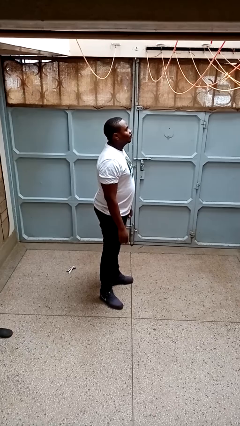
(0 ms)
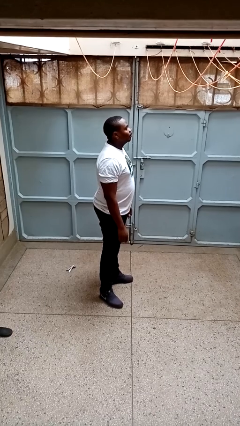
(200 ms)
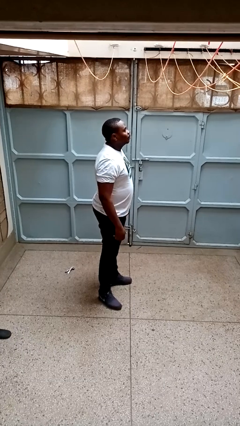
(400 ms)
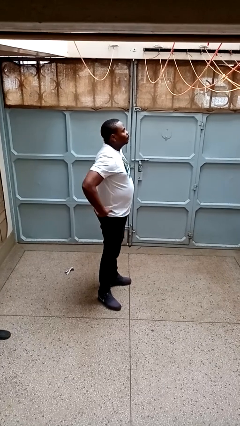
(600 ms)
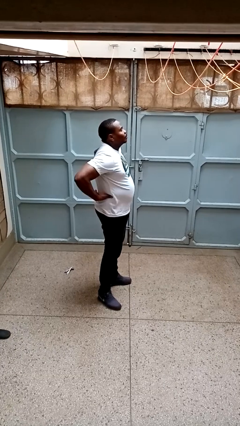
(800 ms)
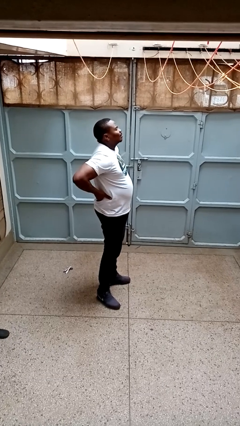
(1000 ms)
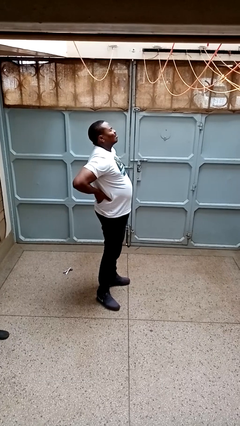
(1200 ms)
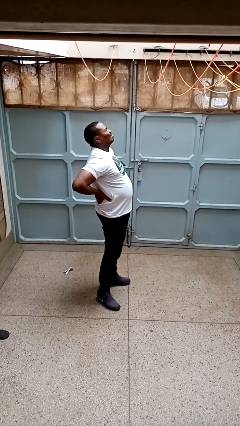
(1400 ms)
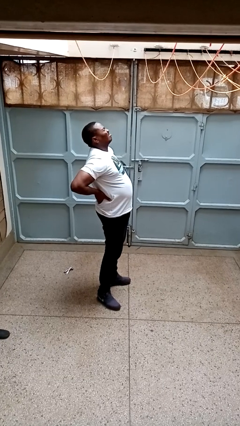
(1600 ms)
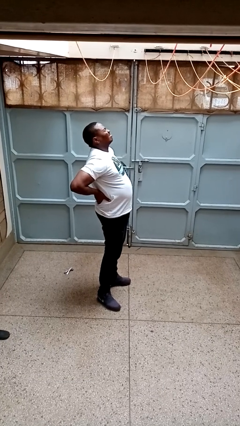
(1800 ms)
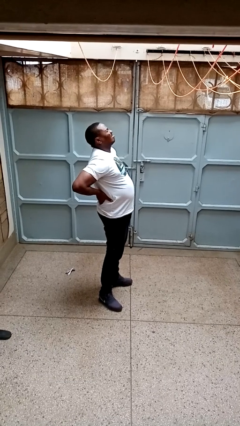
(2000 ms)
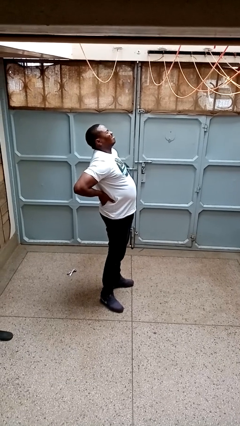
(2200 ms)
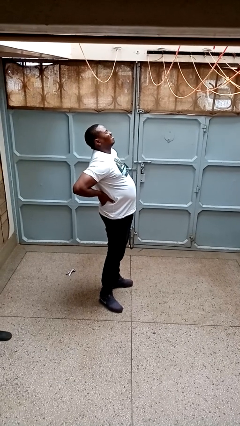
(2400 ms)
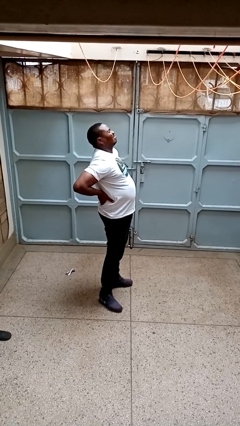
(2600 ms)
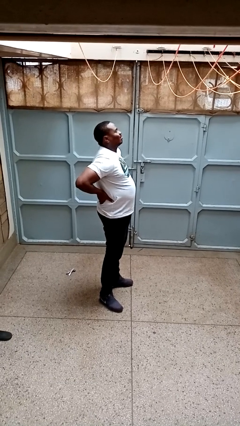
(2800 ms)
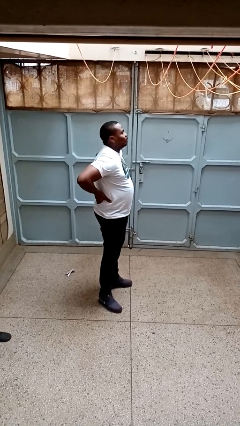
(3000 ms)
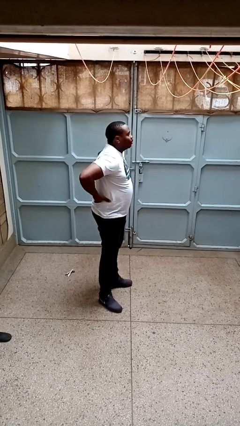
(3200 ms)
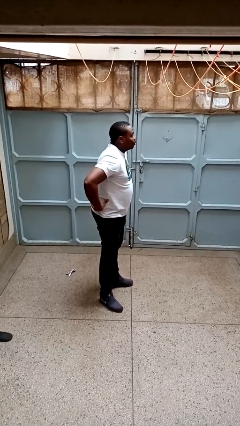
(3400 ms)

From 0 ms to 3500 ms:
person stretches back

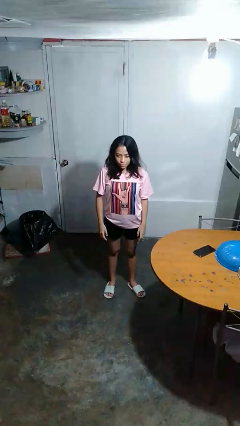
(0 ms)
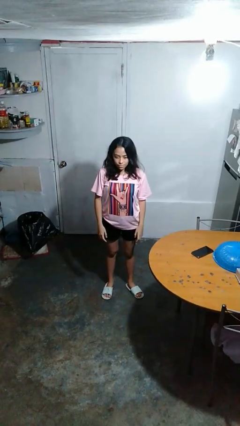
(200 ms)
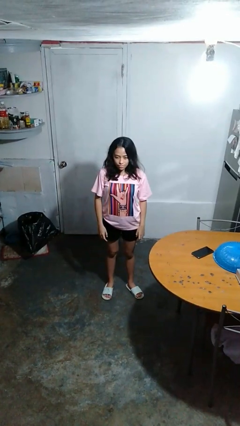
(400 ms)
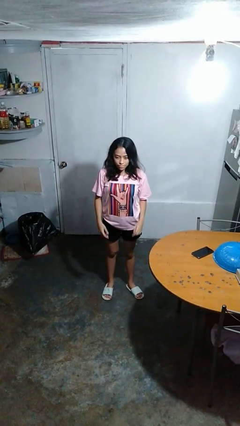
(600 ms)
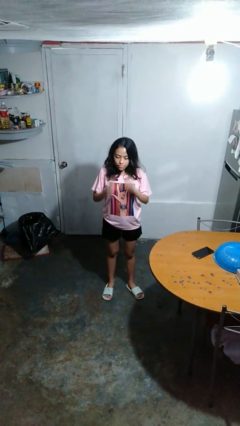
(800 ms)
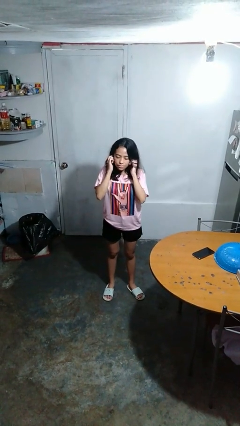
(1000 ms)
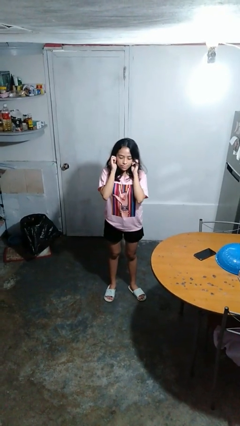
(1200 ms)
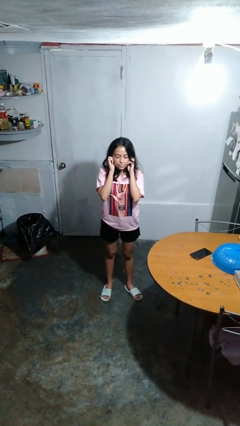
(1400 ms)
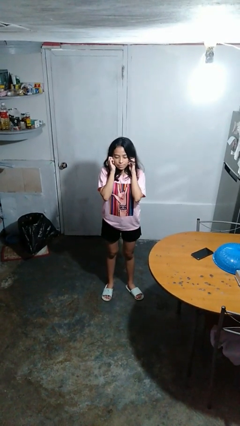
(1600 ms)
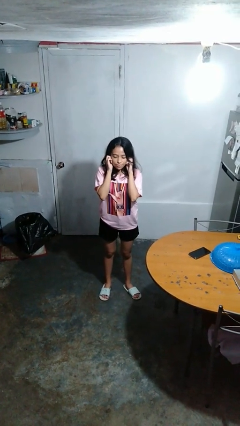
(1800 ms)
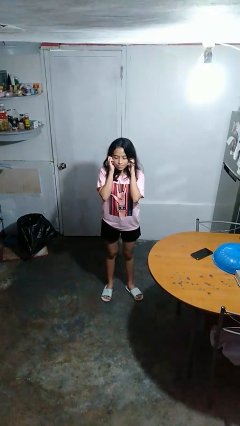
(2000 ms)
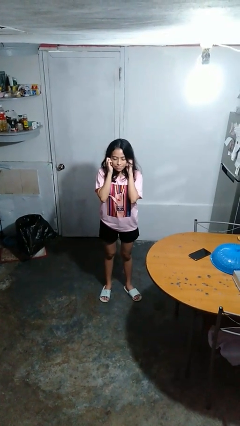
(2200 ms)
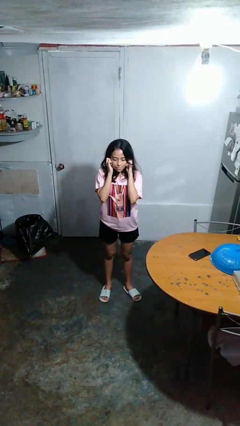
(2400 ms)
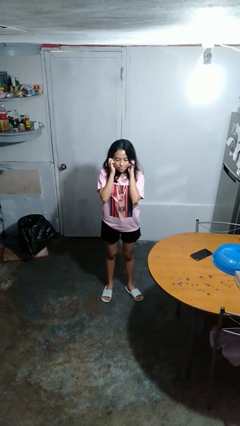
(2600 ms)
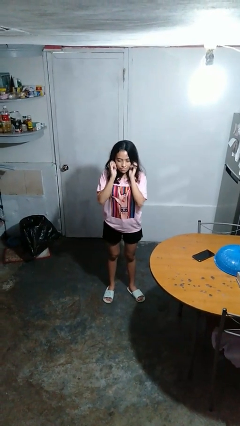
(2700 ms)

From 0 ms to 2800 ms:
person puts fingers in ear

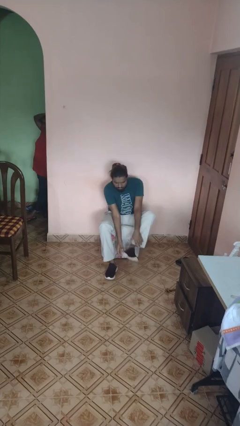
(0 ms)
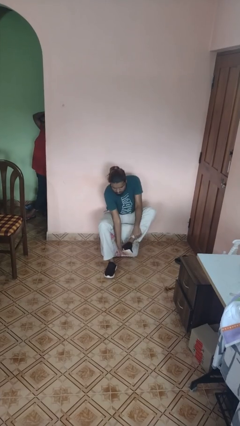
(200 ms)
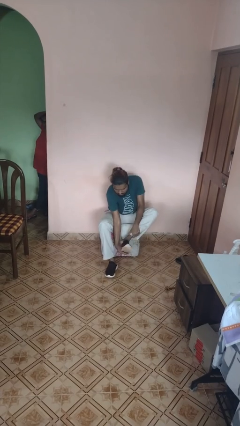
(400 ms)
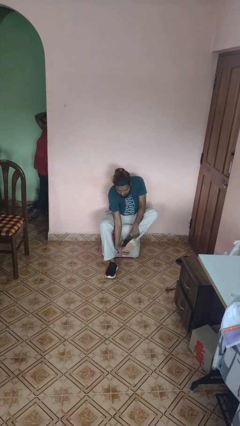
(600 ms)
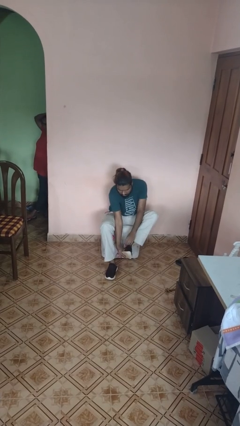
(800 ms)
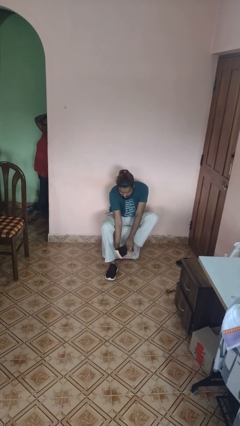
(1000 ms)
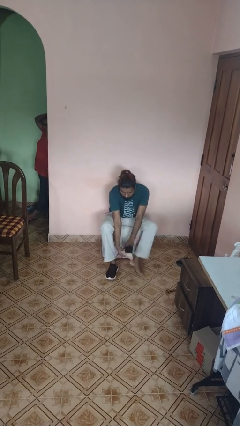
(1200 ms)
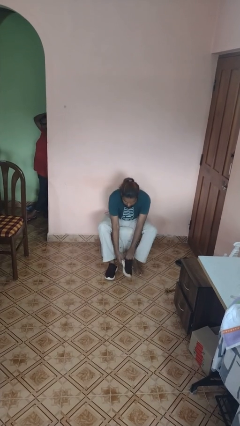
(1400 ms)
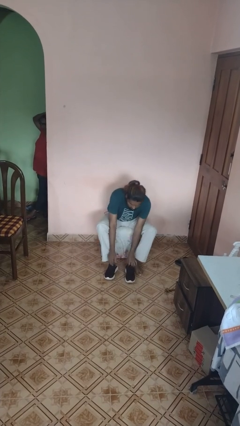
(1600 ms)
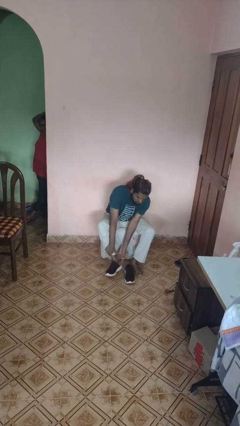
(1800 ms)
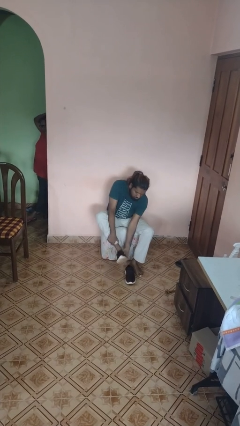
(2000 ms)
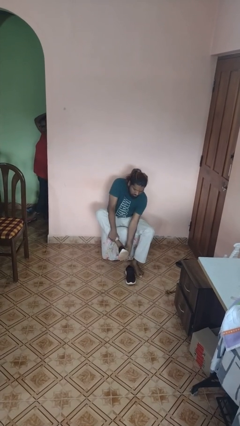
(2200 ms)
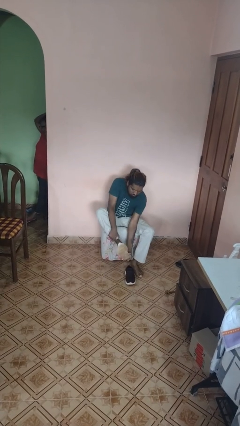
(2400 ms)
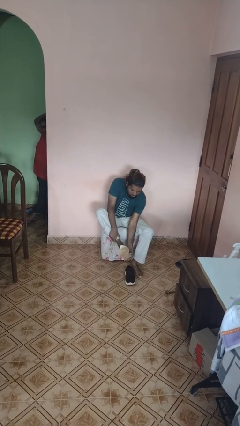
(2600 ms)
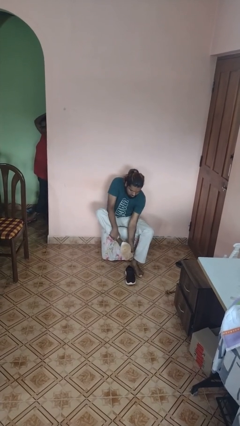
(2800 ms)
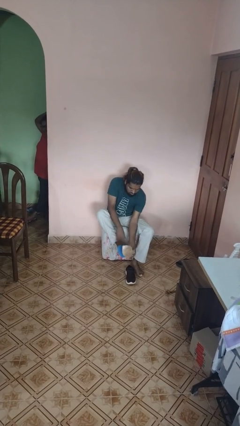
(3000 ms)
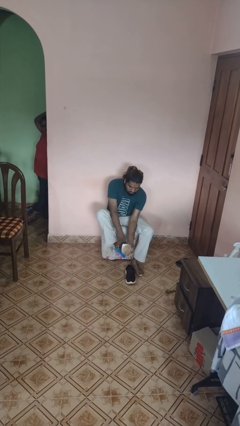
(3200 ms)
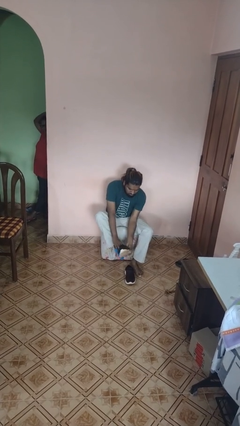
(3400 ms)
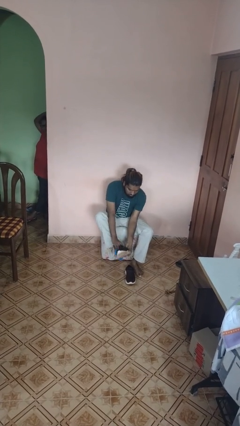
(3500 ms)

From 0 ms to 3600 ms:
person takes off shoes

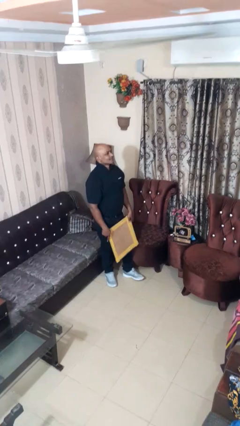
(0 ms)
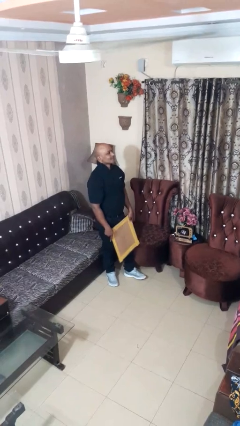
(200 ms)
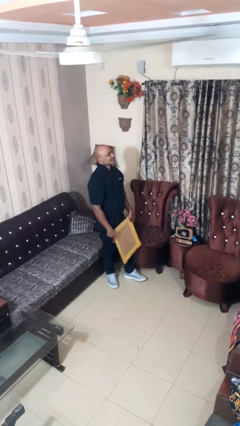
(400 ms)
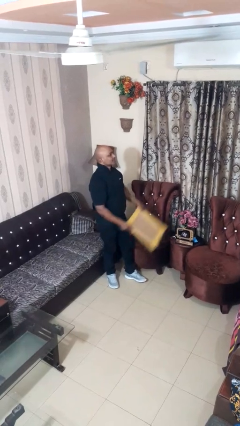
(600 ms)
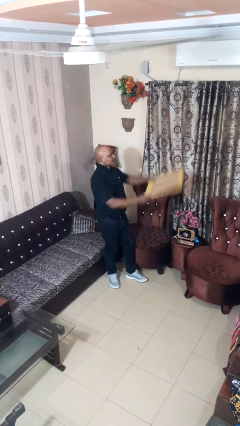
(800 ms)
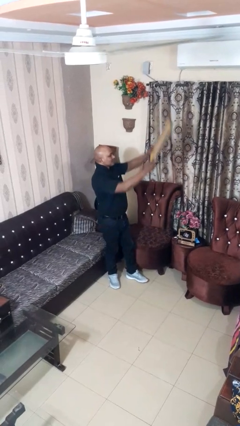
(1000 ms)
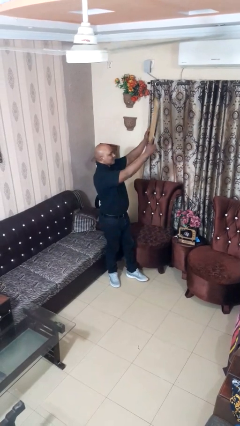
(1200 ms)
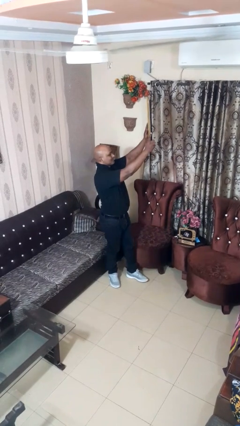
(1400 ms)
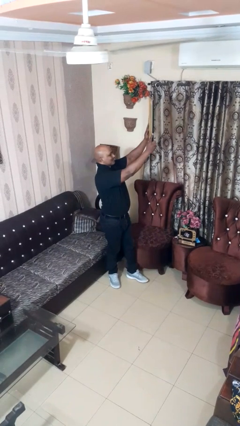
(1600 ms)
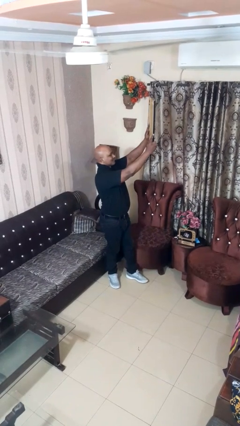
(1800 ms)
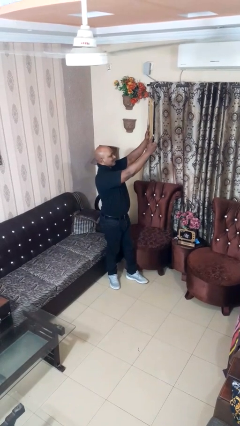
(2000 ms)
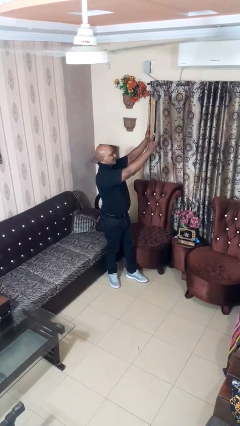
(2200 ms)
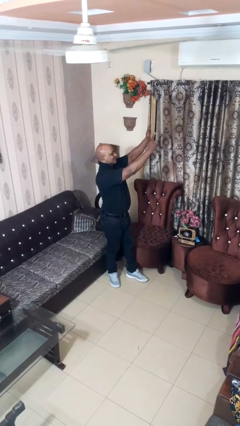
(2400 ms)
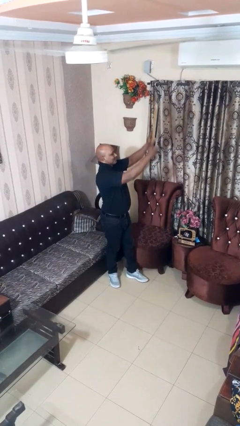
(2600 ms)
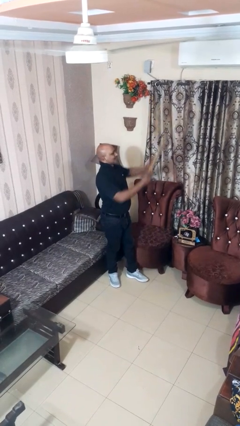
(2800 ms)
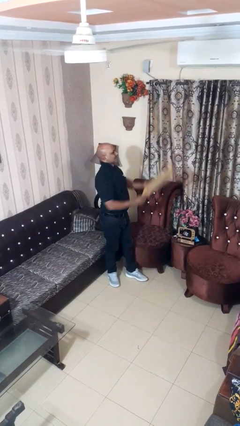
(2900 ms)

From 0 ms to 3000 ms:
person holds object above head

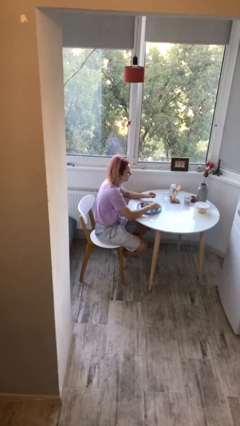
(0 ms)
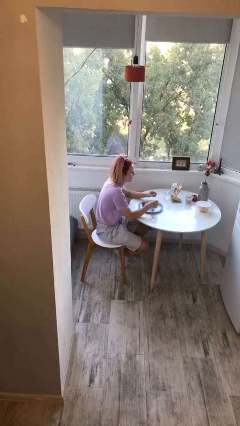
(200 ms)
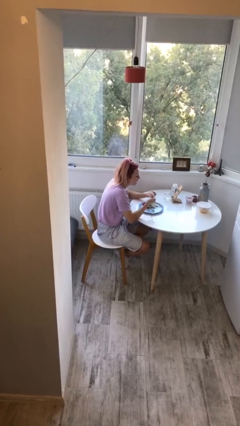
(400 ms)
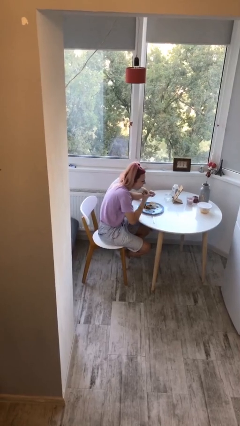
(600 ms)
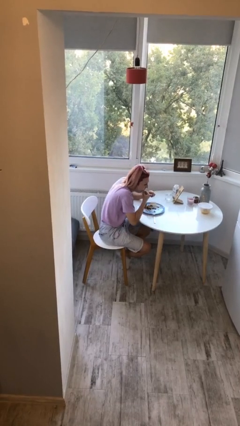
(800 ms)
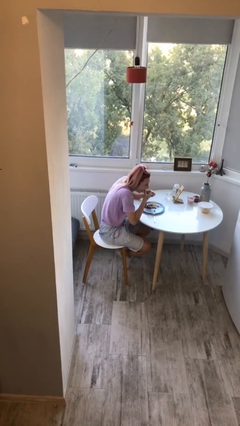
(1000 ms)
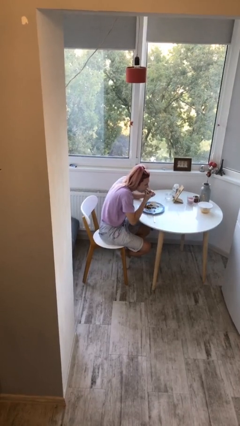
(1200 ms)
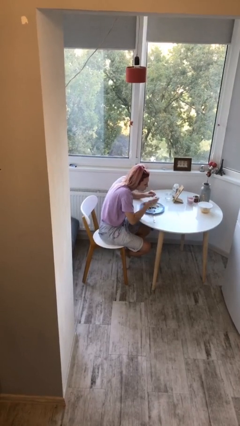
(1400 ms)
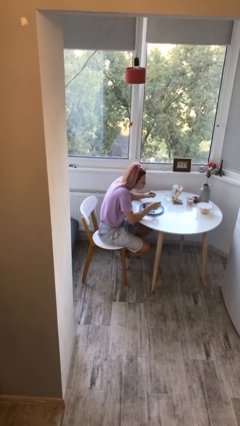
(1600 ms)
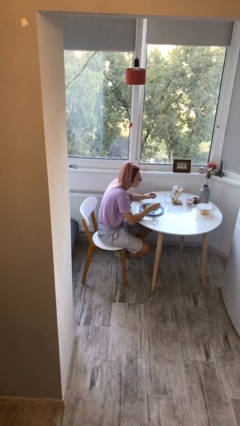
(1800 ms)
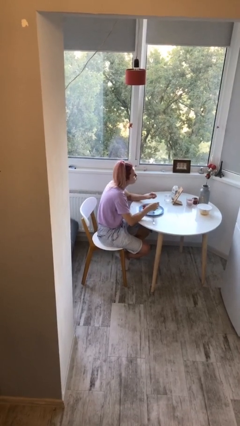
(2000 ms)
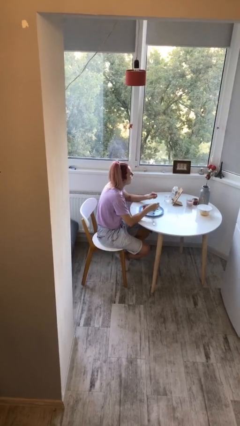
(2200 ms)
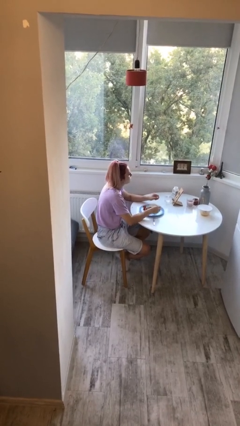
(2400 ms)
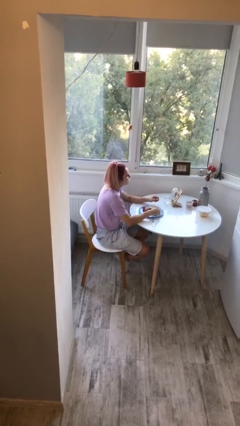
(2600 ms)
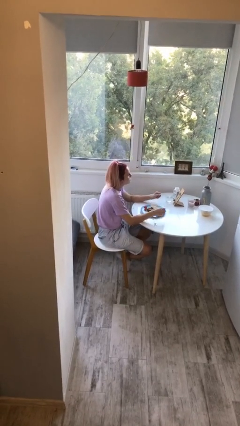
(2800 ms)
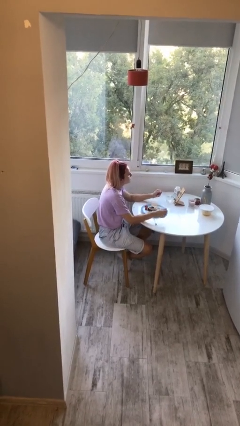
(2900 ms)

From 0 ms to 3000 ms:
person eats with hands

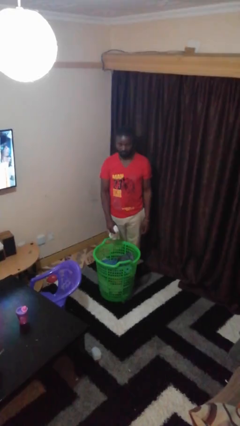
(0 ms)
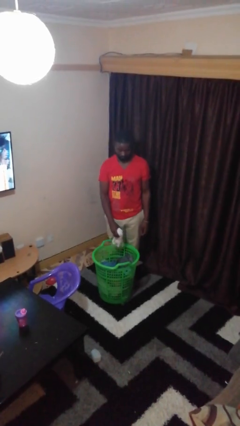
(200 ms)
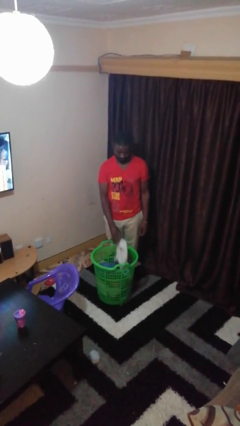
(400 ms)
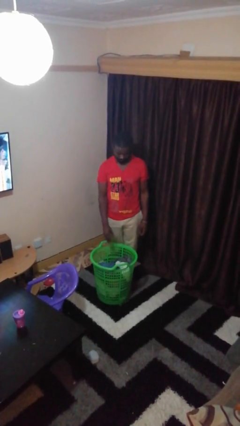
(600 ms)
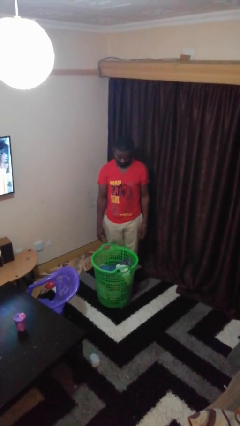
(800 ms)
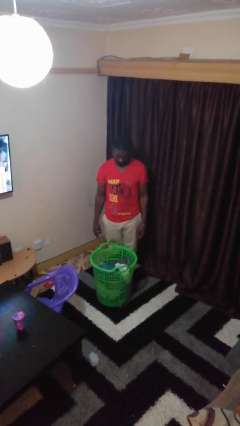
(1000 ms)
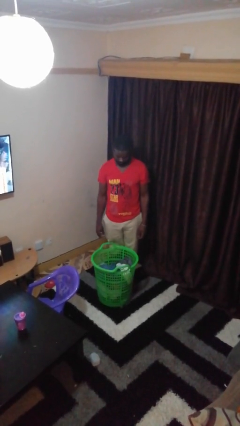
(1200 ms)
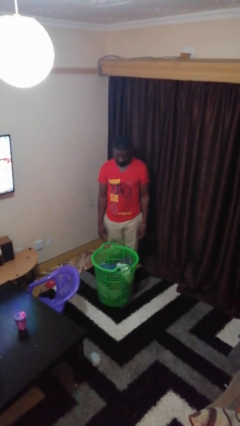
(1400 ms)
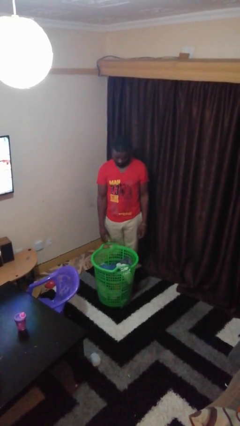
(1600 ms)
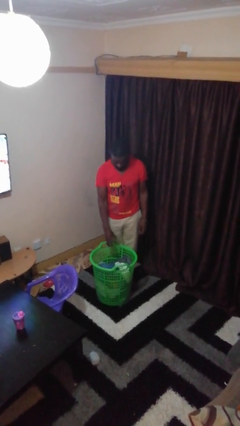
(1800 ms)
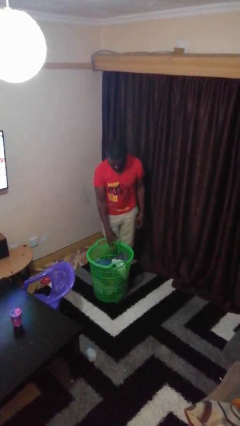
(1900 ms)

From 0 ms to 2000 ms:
person puts object into basket
